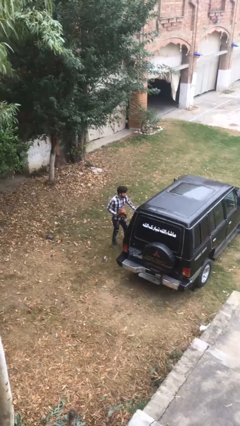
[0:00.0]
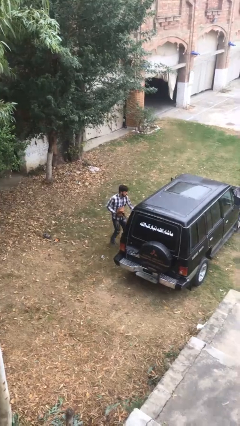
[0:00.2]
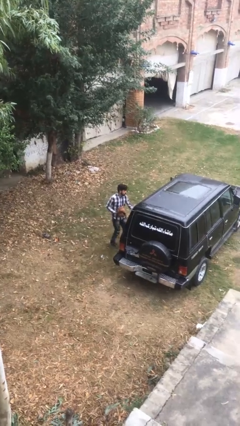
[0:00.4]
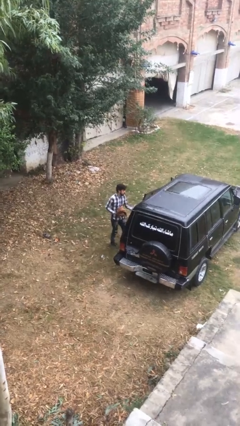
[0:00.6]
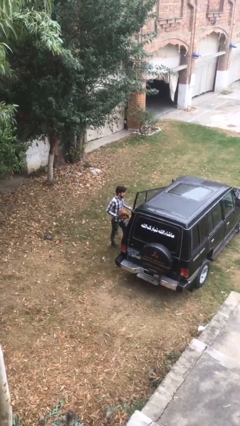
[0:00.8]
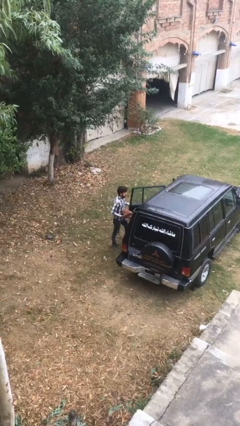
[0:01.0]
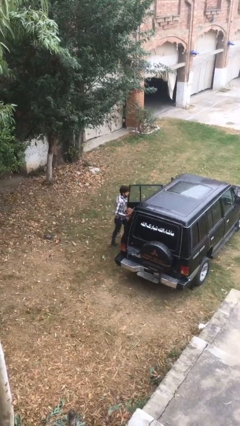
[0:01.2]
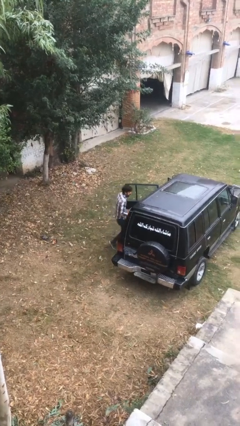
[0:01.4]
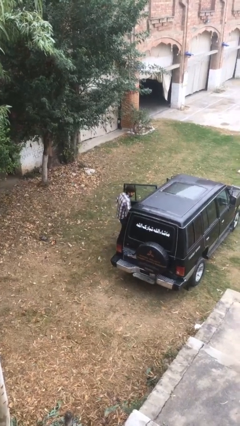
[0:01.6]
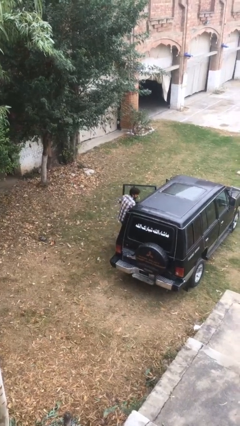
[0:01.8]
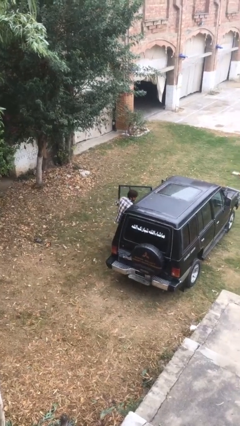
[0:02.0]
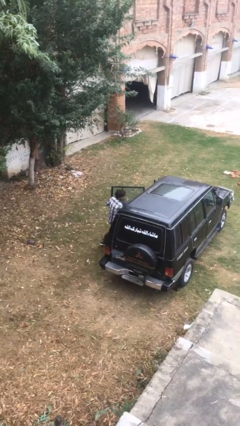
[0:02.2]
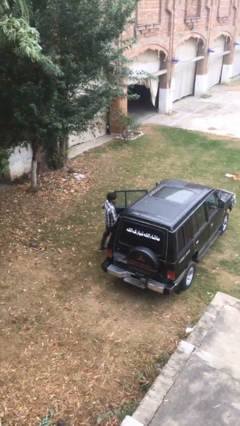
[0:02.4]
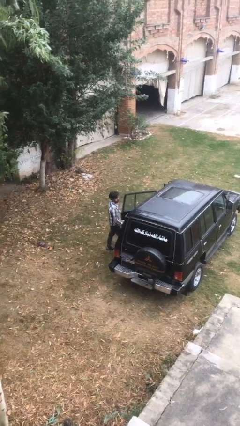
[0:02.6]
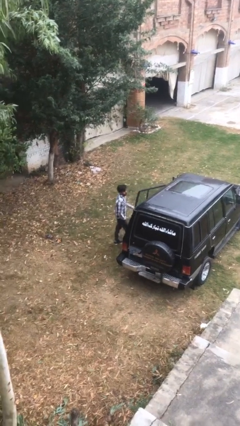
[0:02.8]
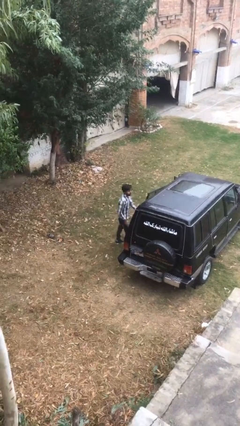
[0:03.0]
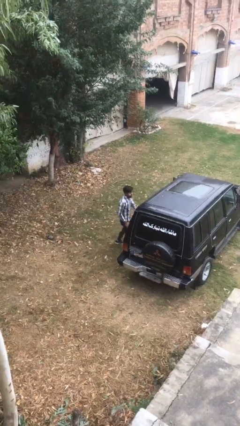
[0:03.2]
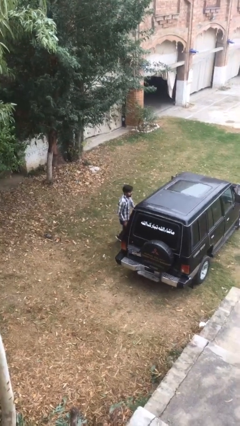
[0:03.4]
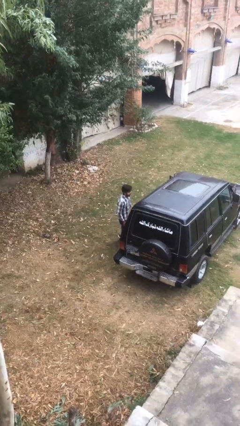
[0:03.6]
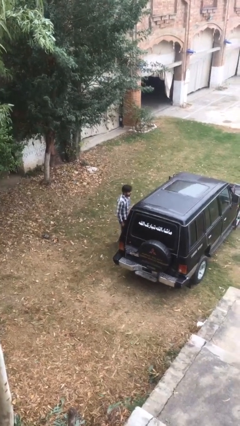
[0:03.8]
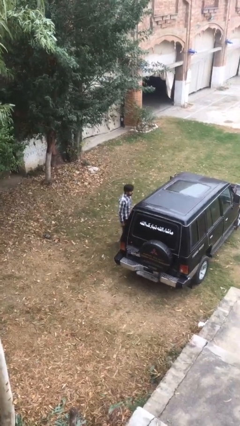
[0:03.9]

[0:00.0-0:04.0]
person loads car

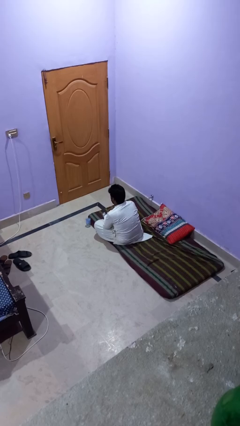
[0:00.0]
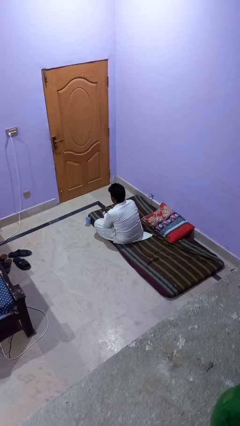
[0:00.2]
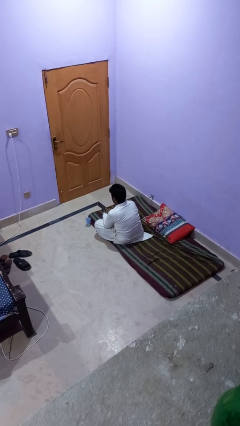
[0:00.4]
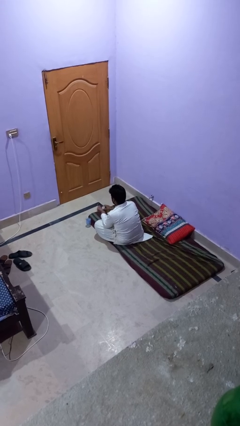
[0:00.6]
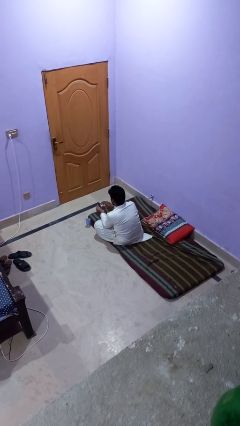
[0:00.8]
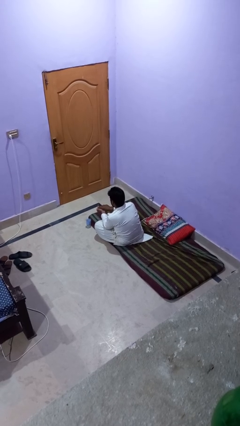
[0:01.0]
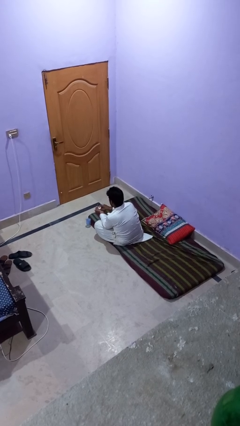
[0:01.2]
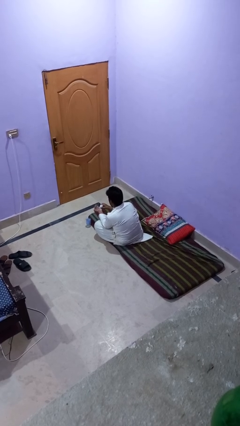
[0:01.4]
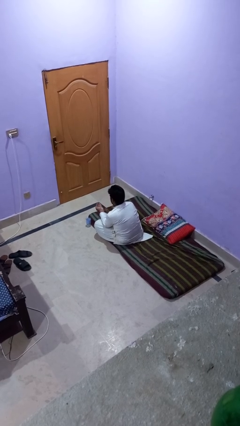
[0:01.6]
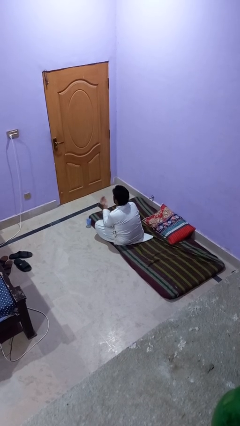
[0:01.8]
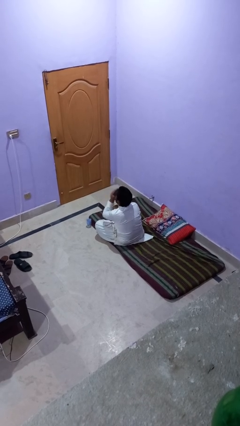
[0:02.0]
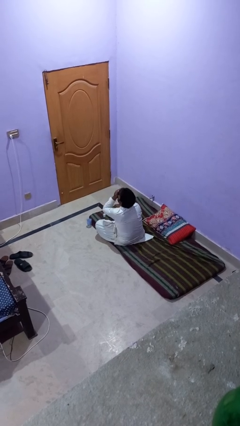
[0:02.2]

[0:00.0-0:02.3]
person takes medicine pills

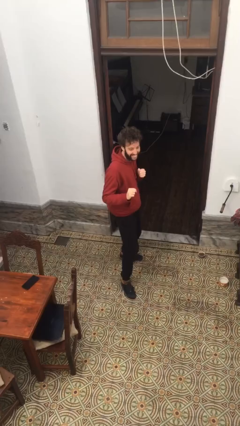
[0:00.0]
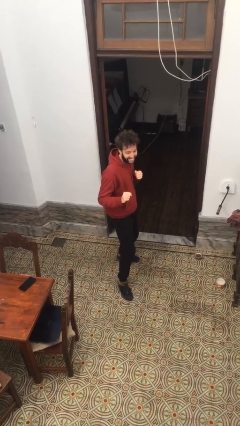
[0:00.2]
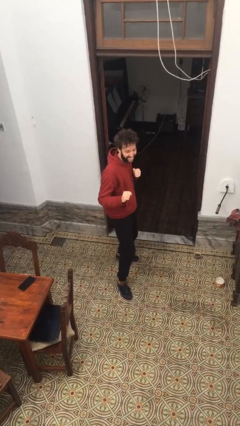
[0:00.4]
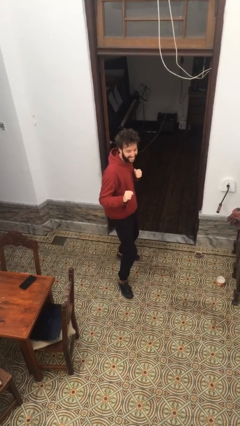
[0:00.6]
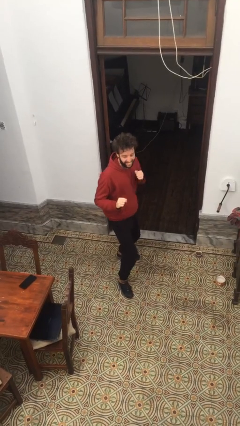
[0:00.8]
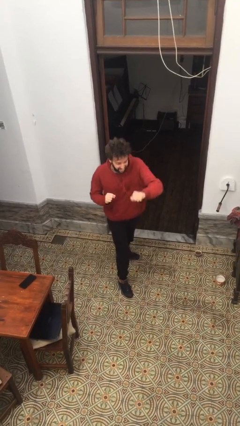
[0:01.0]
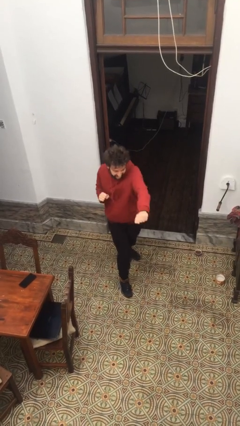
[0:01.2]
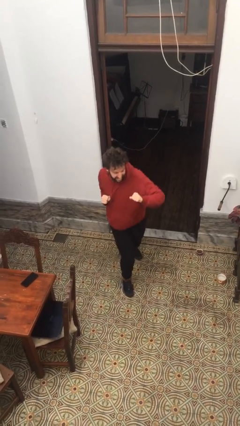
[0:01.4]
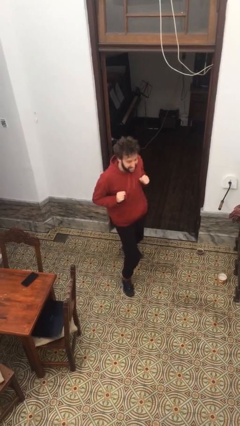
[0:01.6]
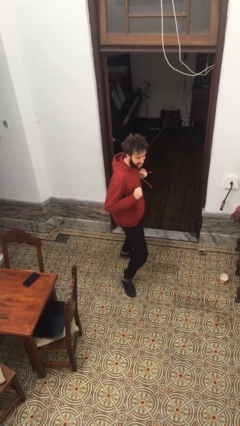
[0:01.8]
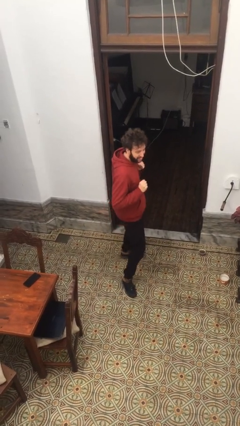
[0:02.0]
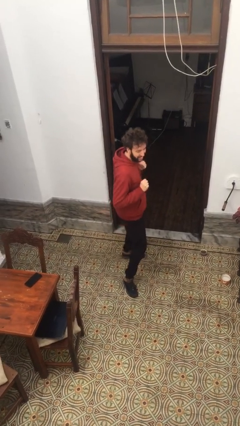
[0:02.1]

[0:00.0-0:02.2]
person karate chop

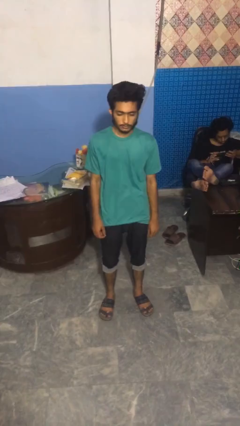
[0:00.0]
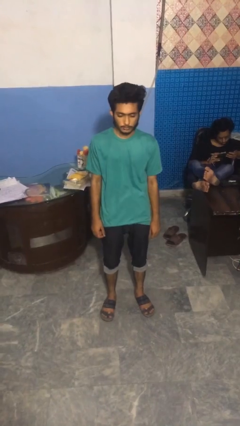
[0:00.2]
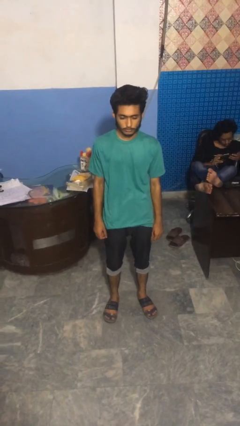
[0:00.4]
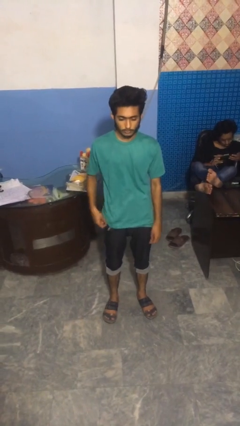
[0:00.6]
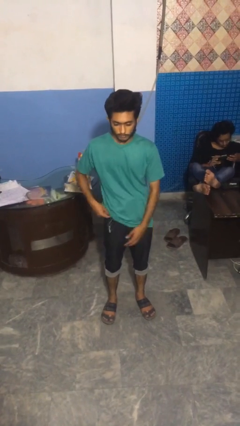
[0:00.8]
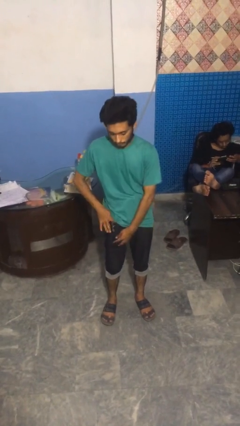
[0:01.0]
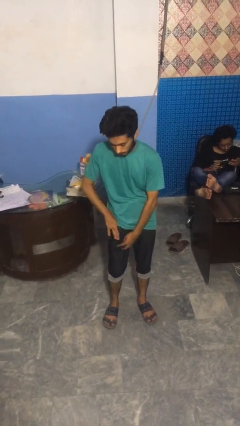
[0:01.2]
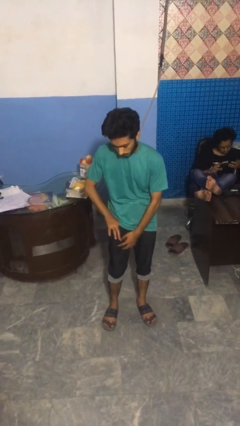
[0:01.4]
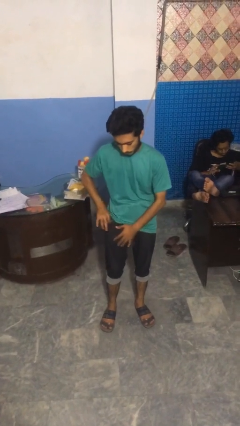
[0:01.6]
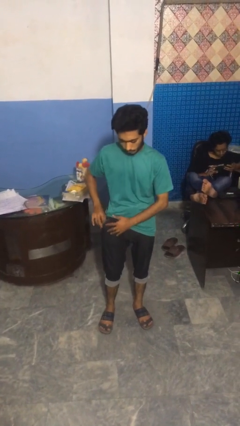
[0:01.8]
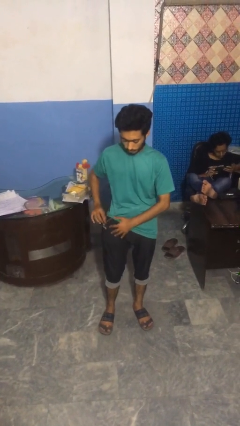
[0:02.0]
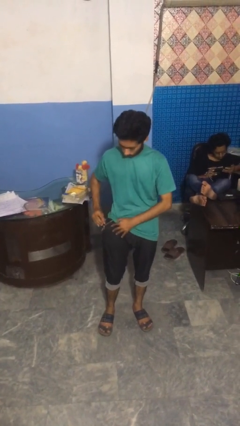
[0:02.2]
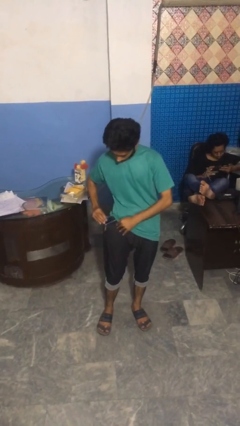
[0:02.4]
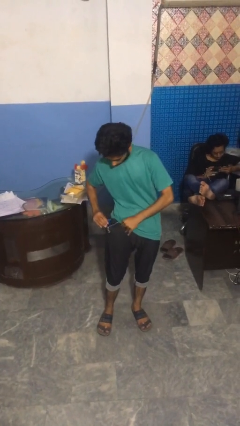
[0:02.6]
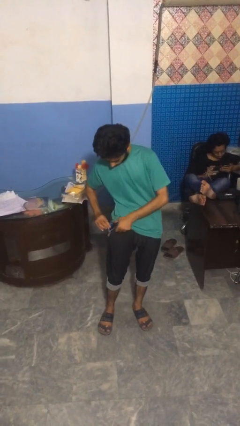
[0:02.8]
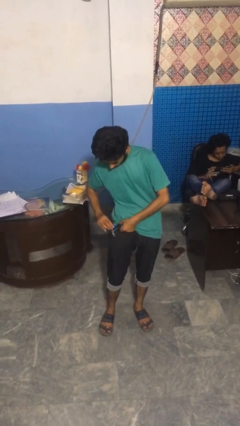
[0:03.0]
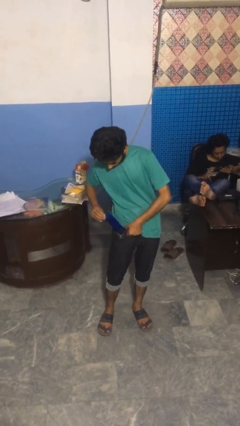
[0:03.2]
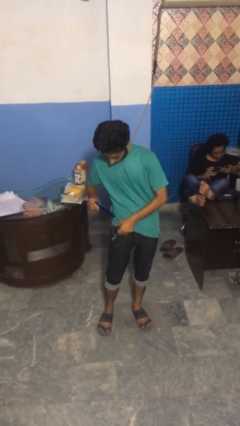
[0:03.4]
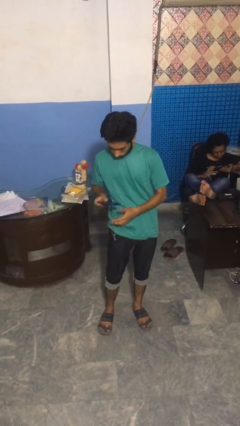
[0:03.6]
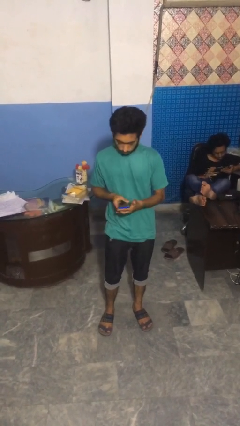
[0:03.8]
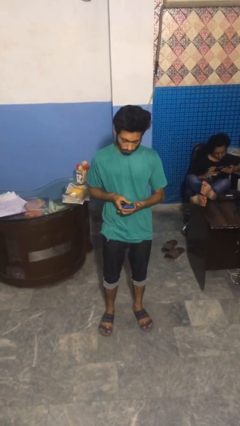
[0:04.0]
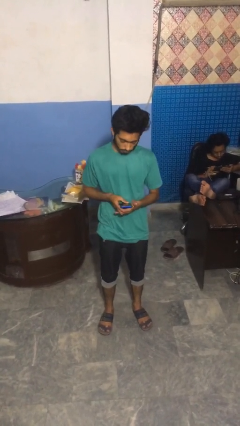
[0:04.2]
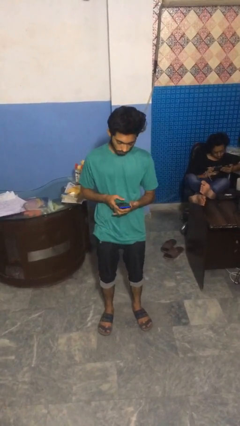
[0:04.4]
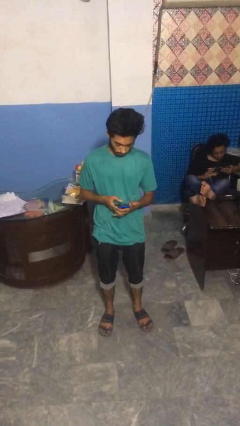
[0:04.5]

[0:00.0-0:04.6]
person takes phone from pocket

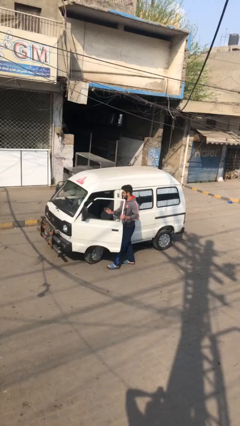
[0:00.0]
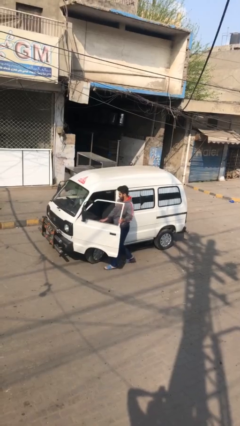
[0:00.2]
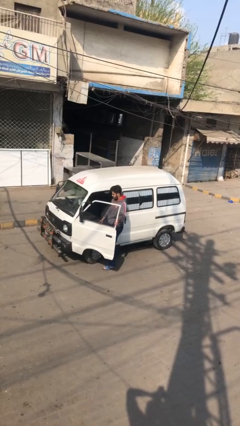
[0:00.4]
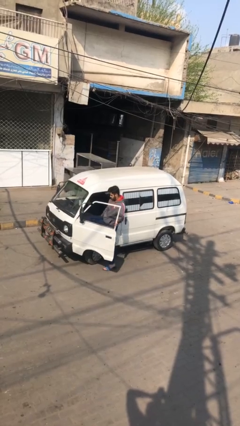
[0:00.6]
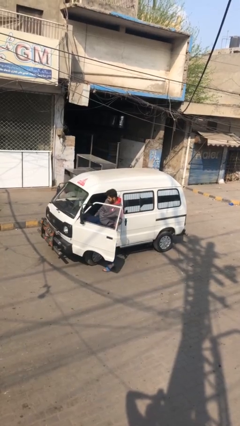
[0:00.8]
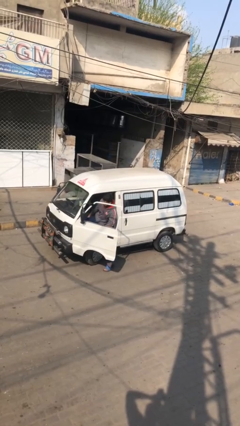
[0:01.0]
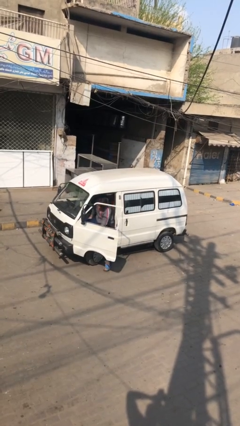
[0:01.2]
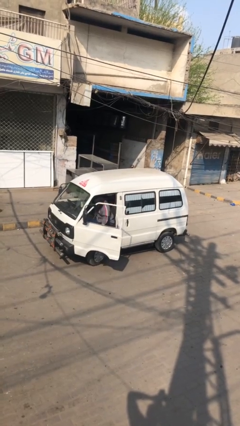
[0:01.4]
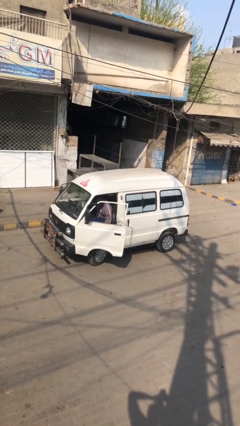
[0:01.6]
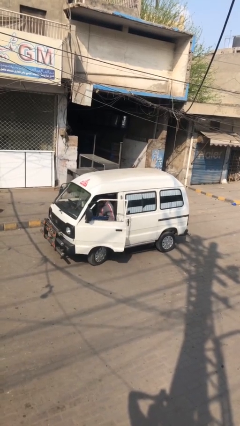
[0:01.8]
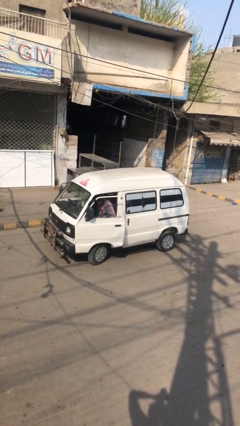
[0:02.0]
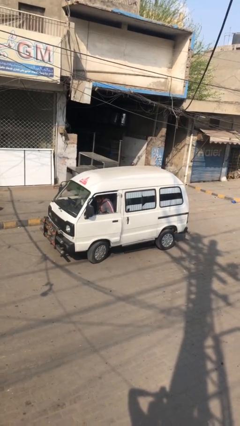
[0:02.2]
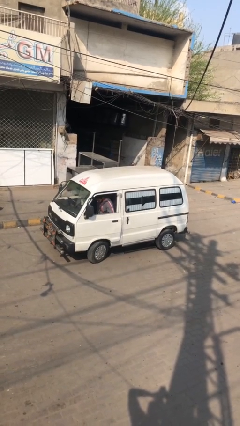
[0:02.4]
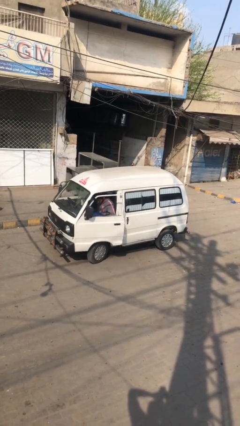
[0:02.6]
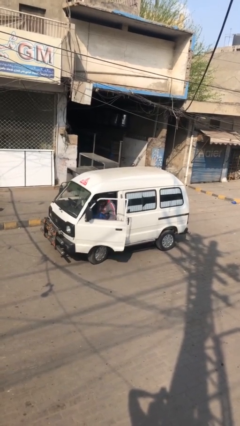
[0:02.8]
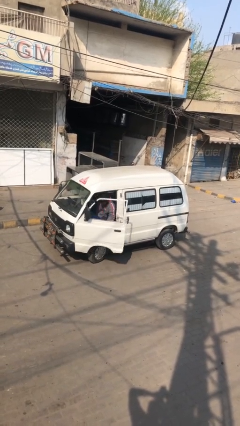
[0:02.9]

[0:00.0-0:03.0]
car picks up person

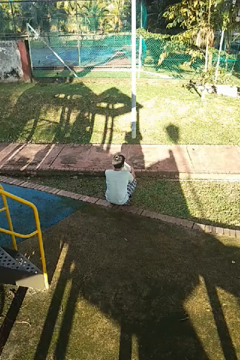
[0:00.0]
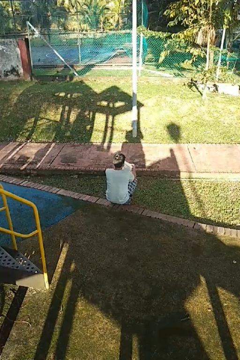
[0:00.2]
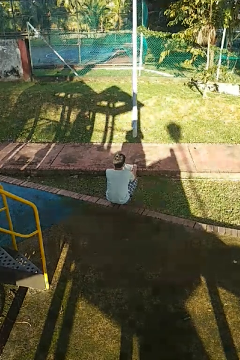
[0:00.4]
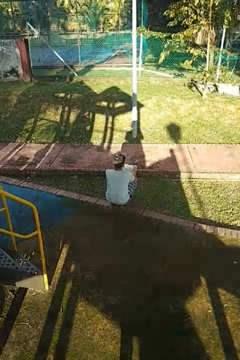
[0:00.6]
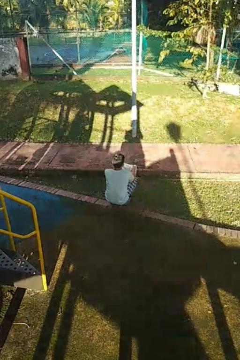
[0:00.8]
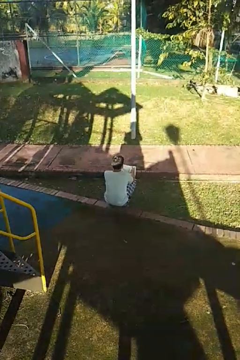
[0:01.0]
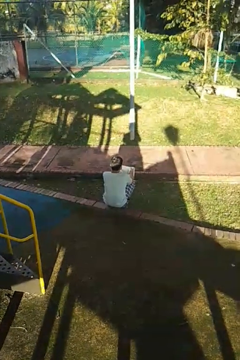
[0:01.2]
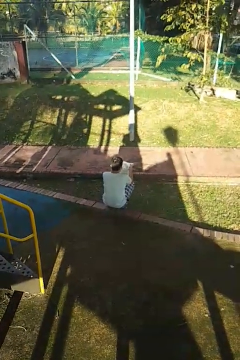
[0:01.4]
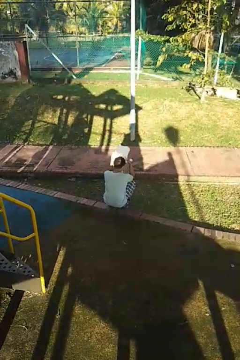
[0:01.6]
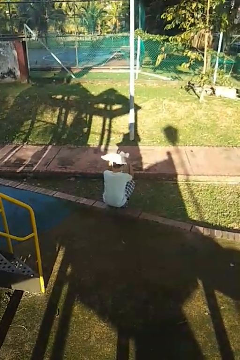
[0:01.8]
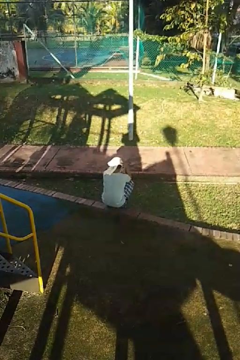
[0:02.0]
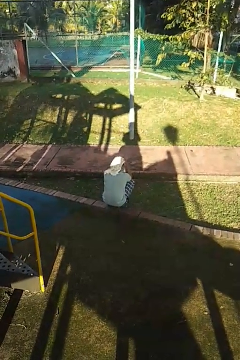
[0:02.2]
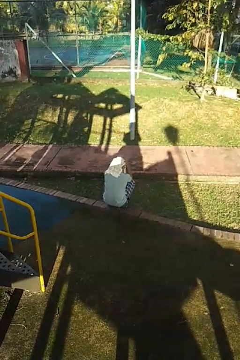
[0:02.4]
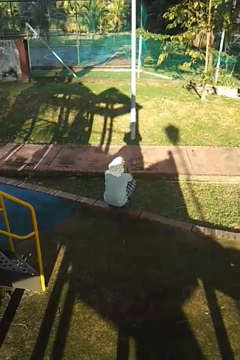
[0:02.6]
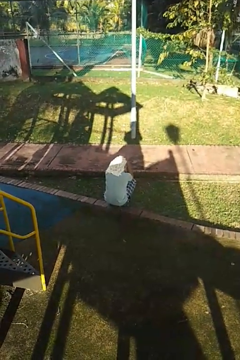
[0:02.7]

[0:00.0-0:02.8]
person dries hair with towel
